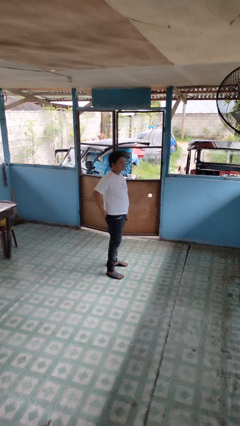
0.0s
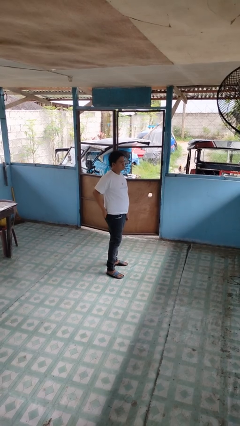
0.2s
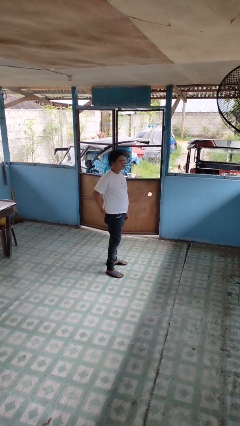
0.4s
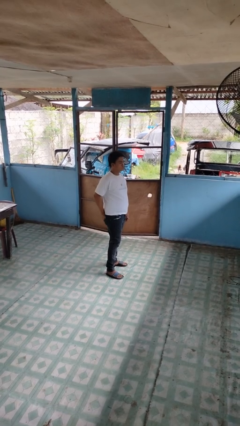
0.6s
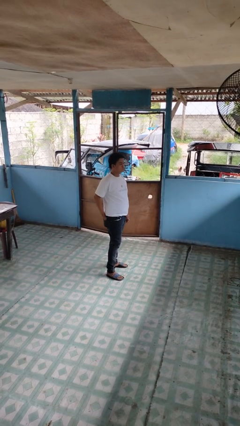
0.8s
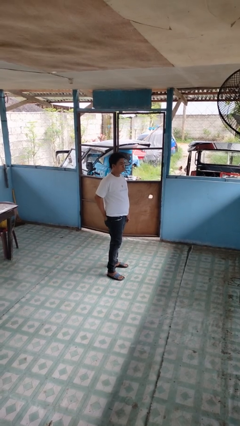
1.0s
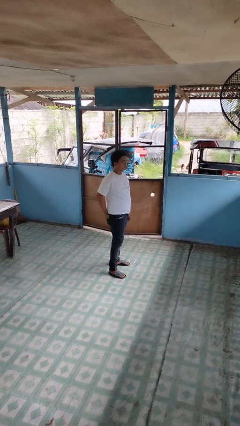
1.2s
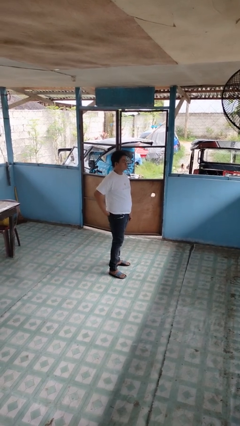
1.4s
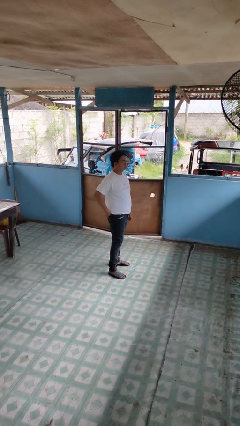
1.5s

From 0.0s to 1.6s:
person puts hands in back pockets

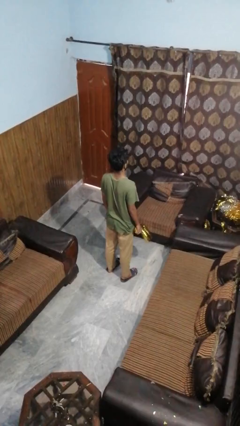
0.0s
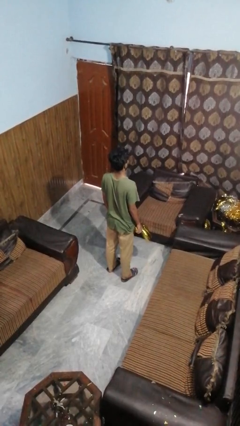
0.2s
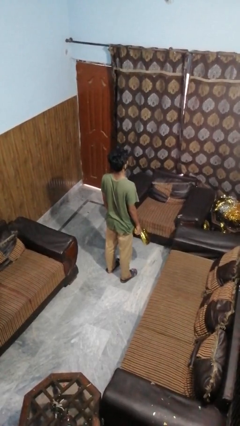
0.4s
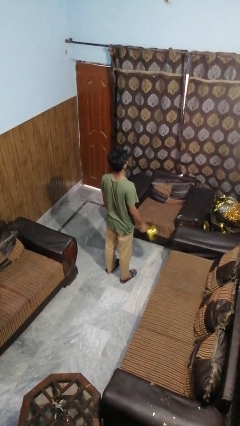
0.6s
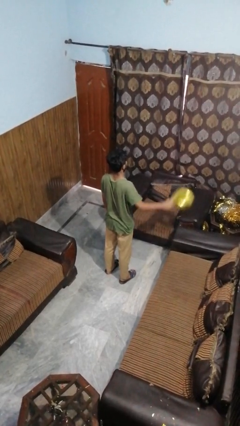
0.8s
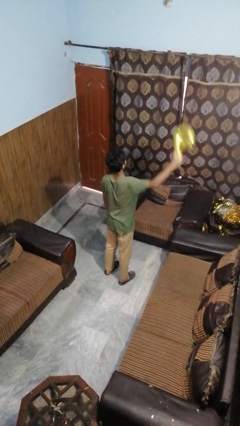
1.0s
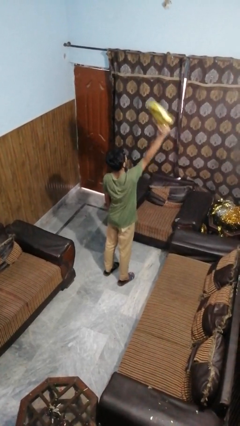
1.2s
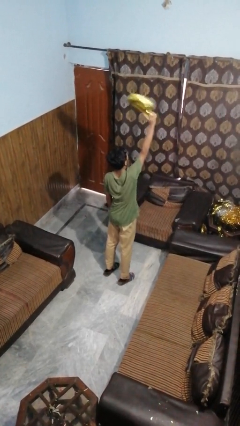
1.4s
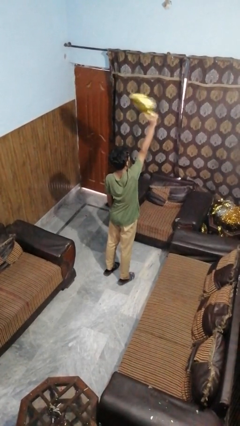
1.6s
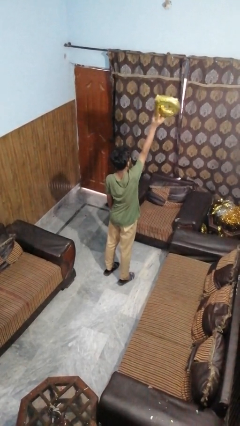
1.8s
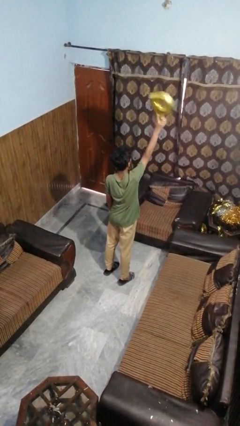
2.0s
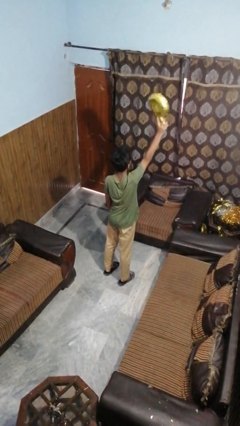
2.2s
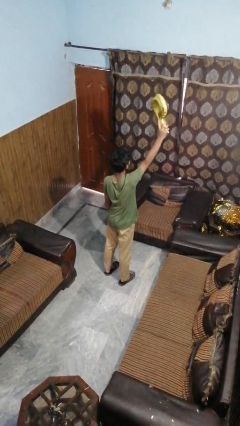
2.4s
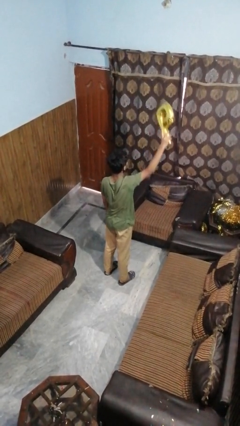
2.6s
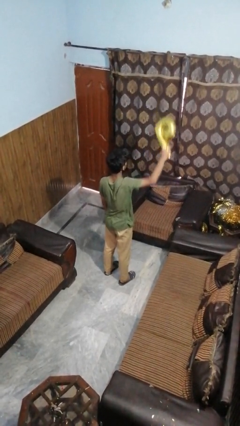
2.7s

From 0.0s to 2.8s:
person holds object above head

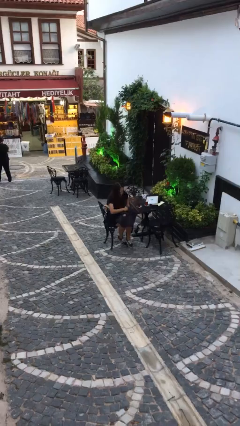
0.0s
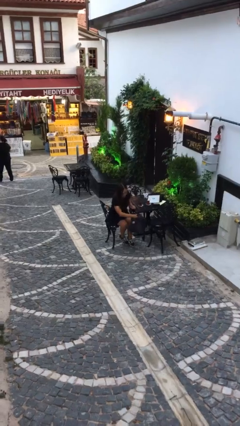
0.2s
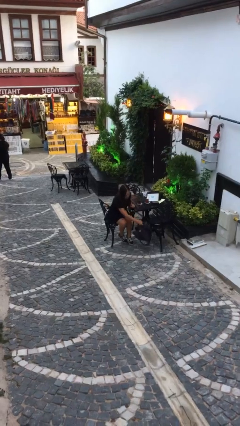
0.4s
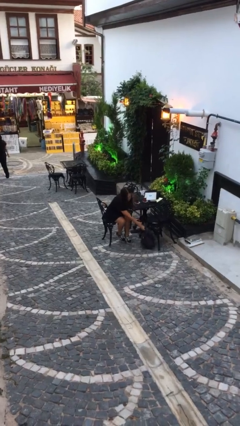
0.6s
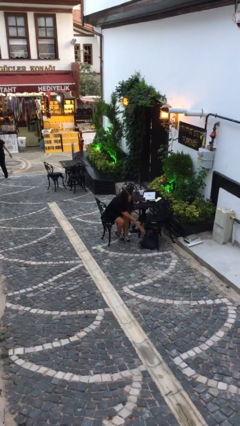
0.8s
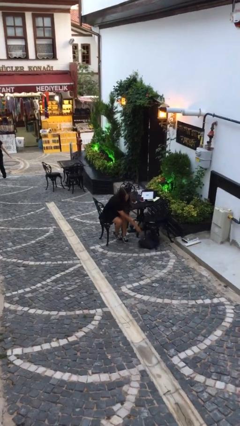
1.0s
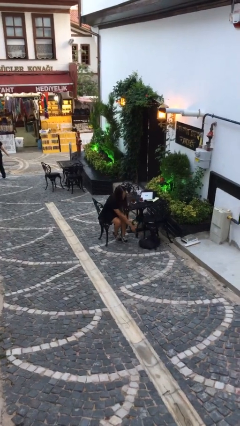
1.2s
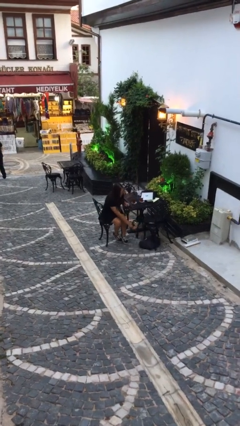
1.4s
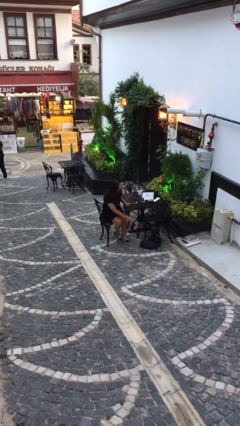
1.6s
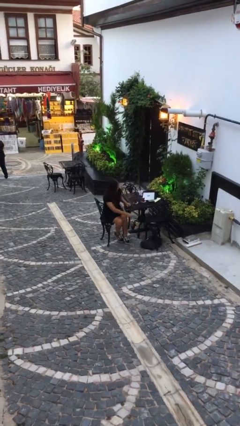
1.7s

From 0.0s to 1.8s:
person puts down object on floor

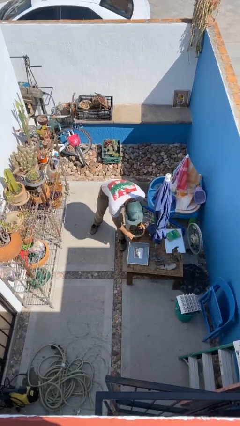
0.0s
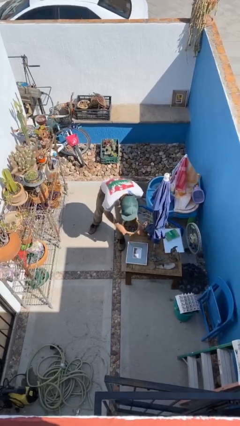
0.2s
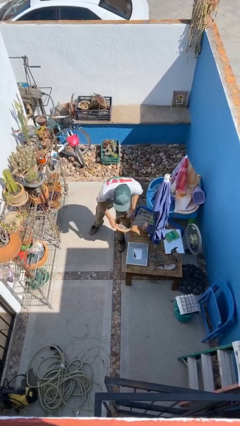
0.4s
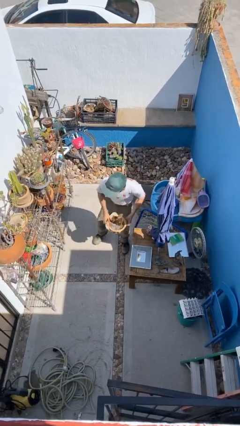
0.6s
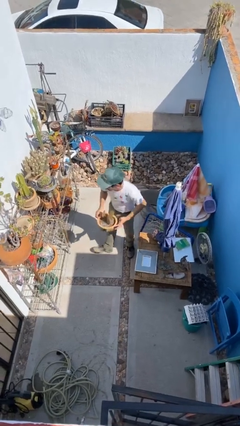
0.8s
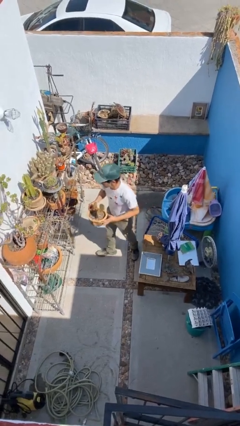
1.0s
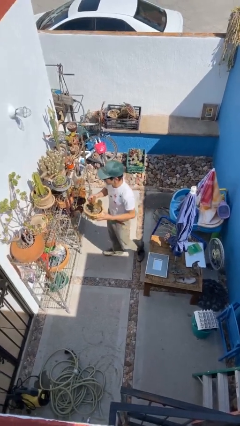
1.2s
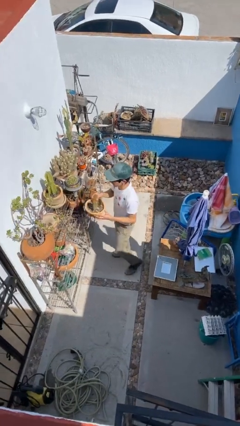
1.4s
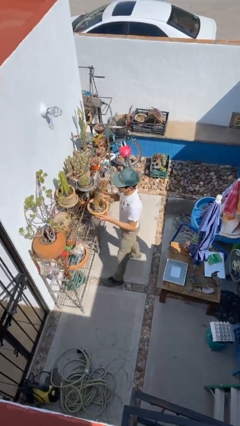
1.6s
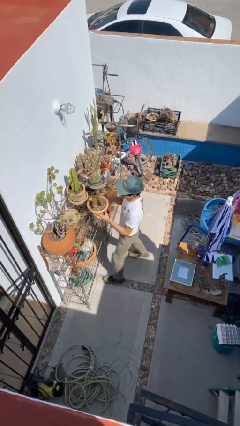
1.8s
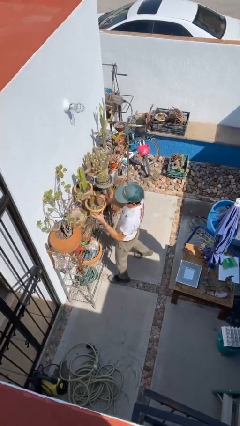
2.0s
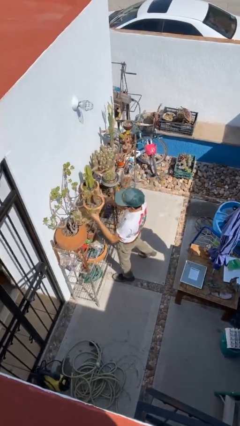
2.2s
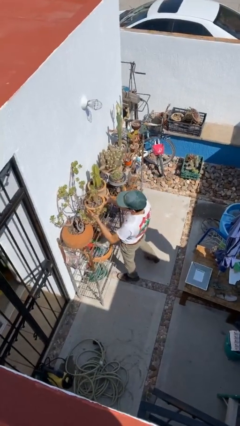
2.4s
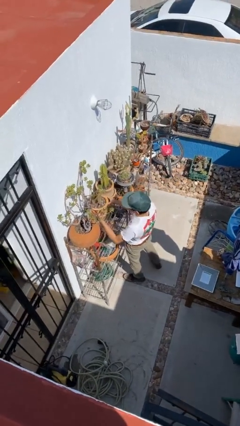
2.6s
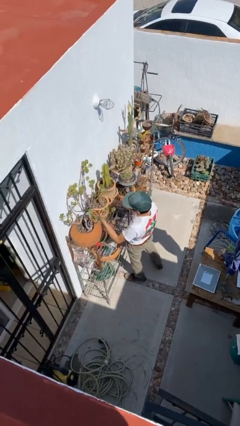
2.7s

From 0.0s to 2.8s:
person picks up object from table

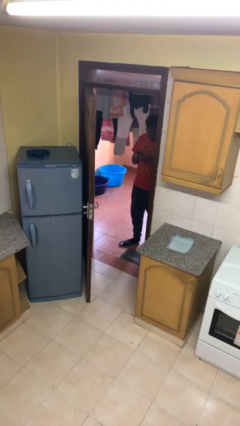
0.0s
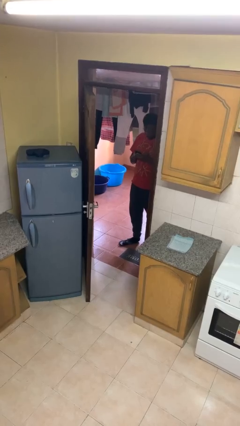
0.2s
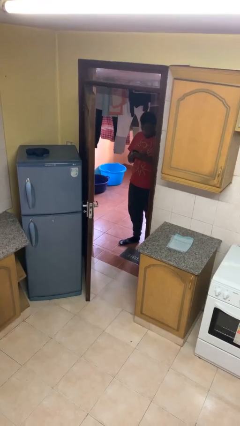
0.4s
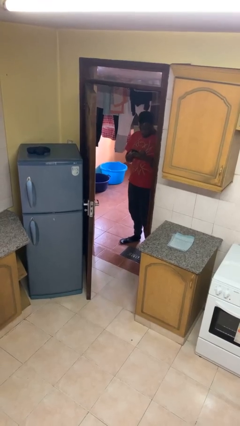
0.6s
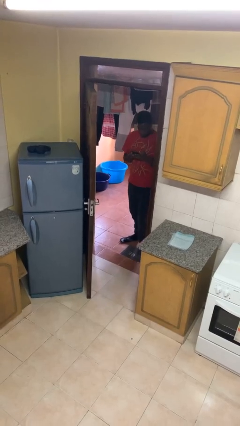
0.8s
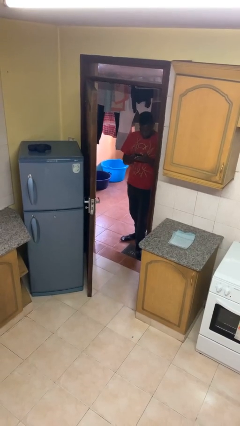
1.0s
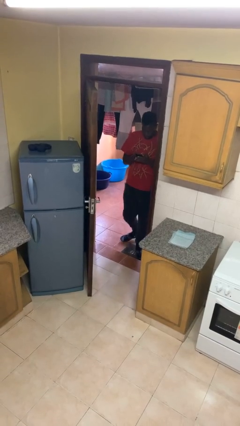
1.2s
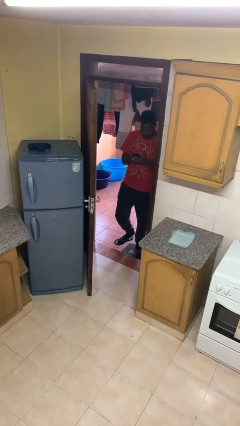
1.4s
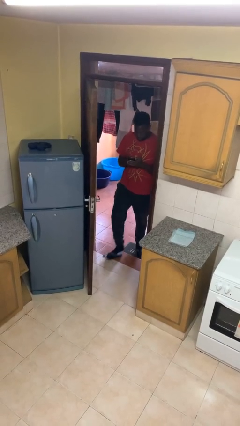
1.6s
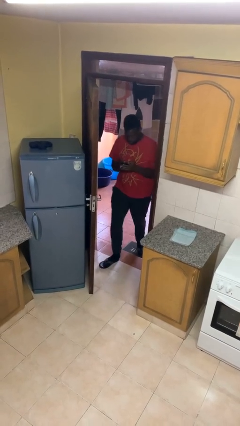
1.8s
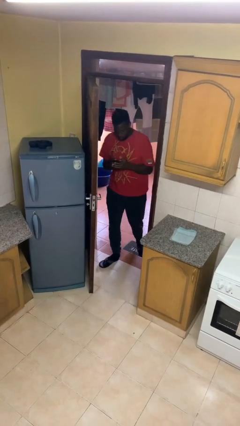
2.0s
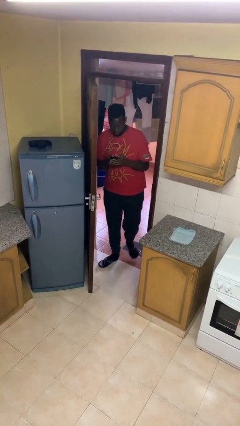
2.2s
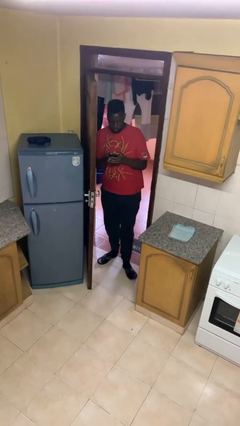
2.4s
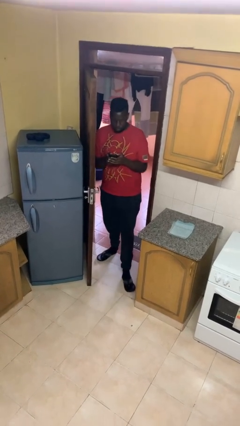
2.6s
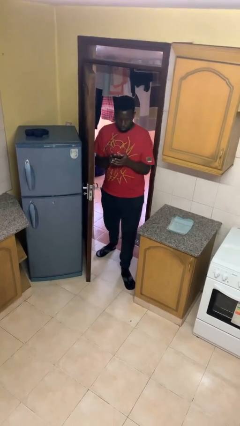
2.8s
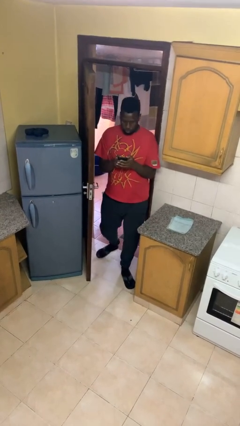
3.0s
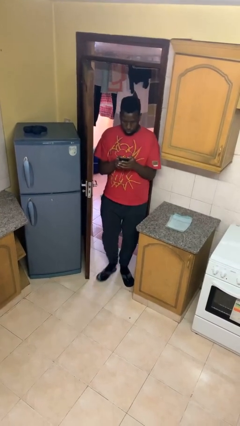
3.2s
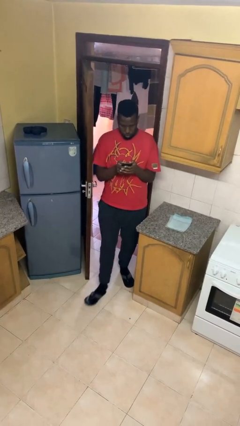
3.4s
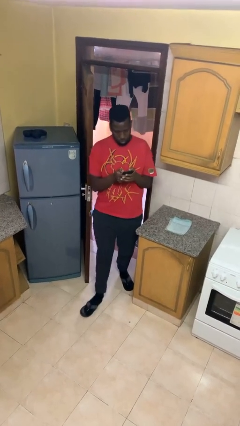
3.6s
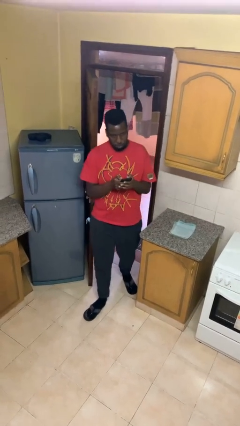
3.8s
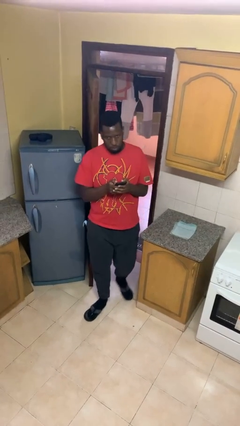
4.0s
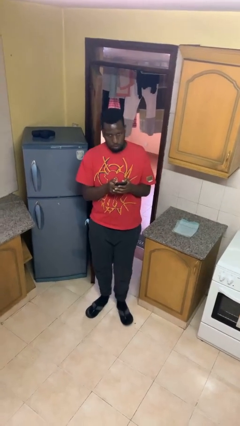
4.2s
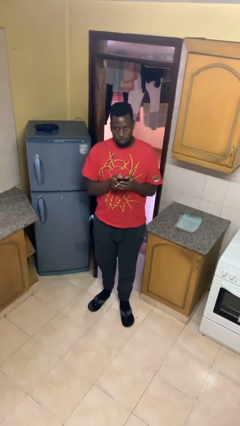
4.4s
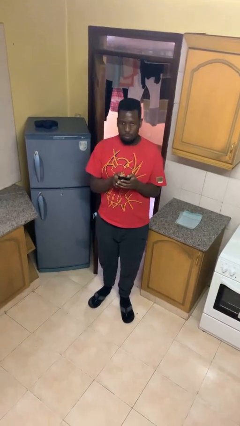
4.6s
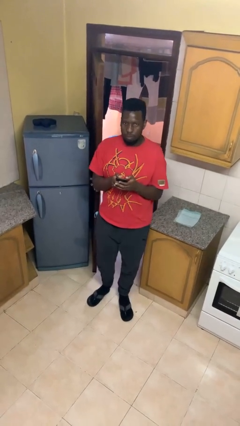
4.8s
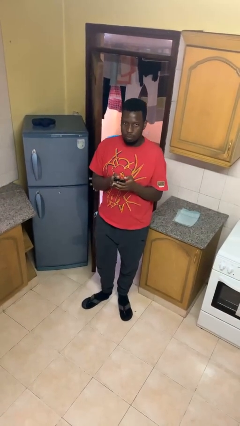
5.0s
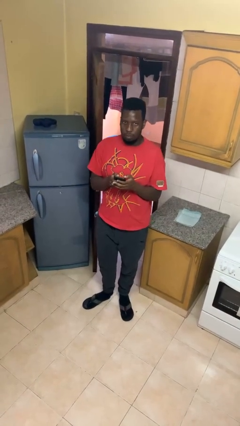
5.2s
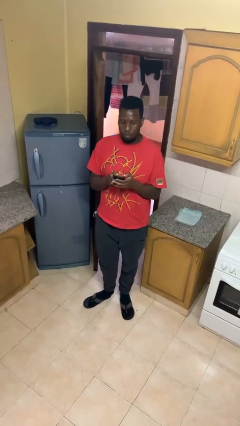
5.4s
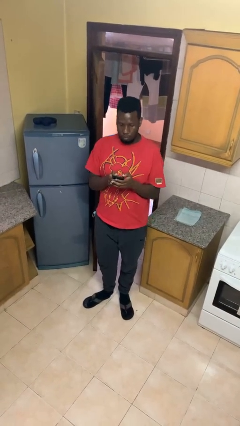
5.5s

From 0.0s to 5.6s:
person enters scene through structure

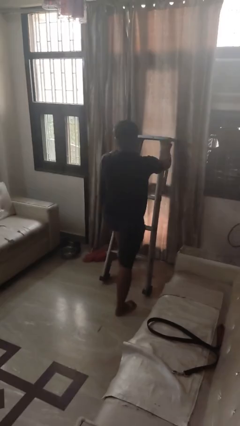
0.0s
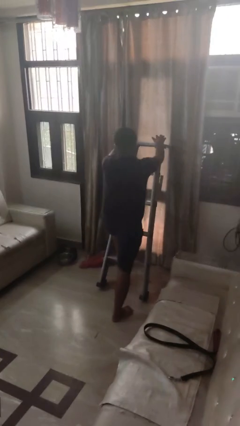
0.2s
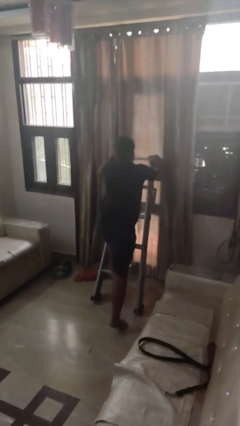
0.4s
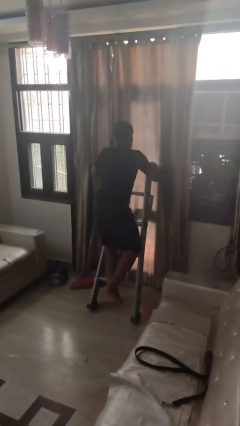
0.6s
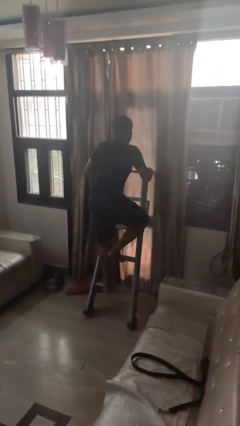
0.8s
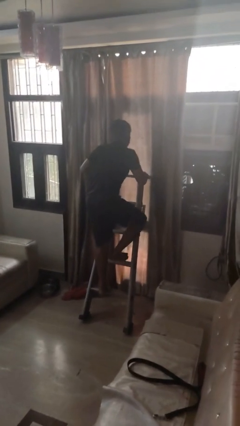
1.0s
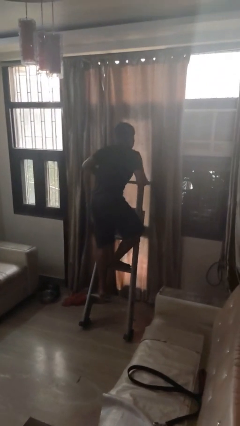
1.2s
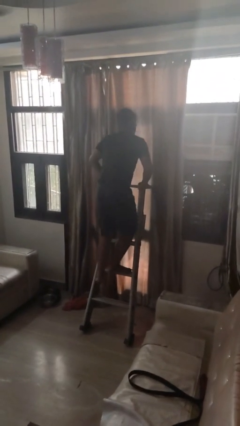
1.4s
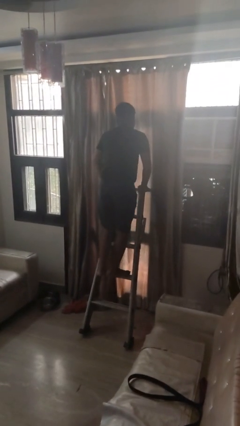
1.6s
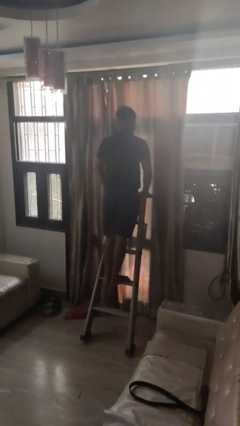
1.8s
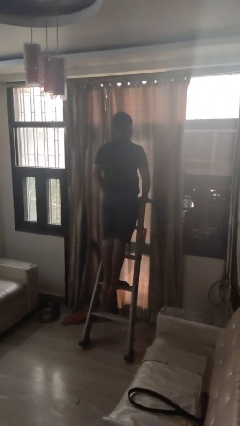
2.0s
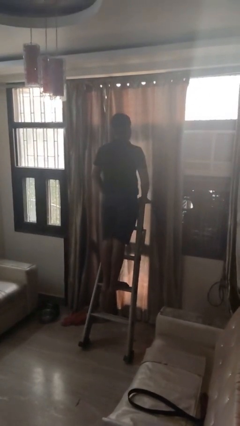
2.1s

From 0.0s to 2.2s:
person climbs up ladder

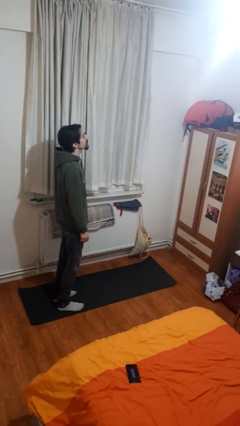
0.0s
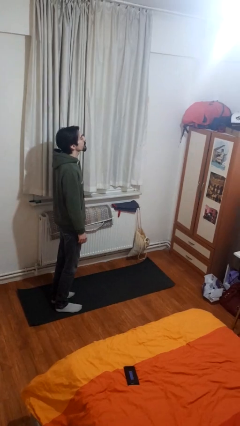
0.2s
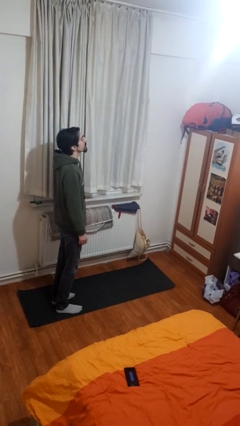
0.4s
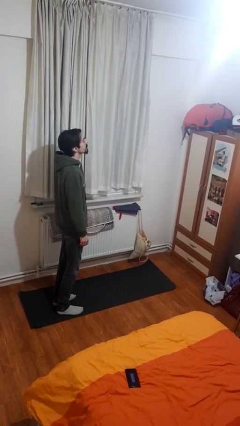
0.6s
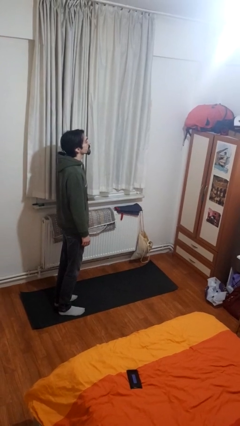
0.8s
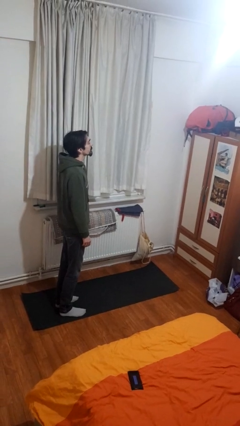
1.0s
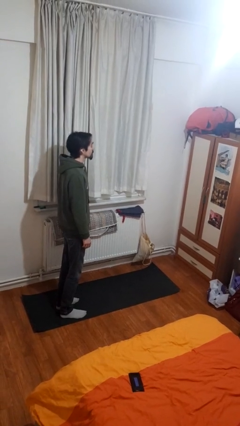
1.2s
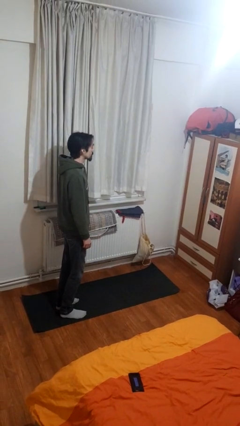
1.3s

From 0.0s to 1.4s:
person stands up from floor
